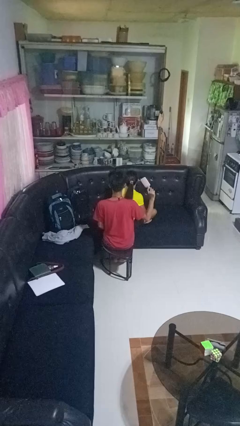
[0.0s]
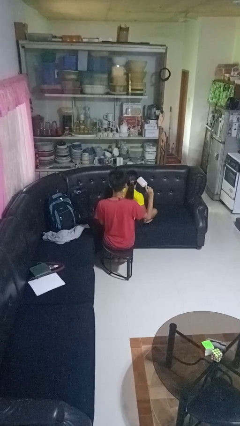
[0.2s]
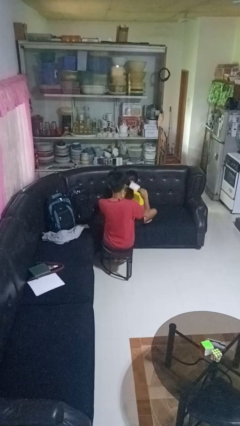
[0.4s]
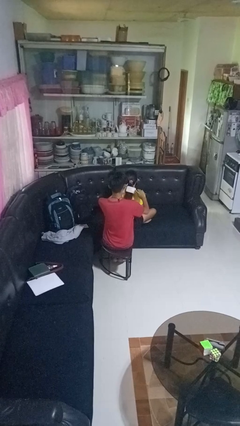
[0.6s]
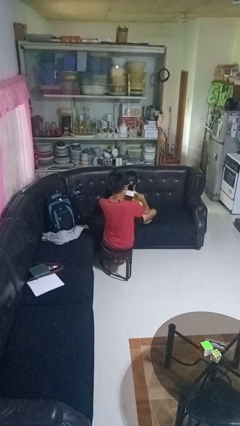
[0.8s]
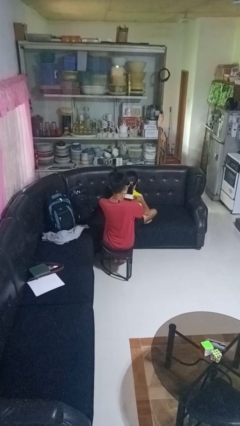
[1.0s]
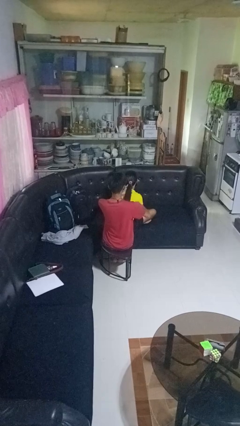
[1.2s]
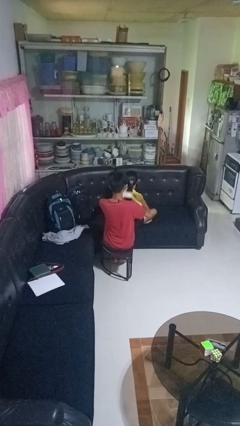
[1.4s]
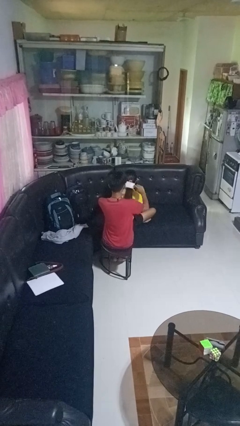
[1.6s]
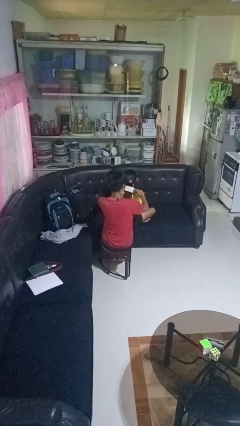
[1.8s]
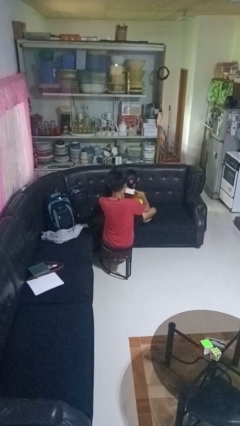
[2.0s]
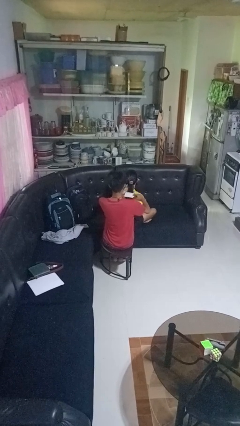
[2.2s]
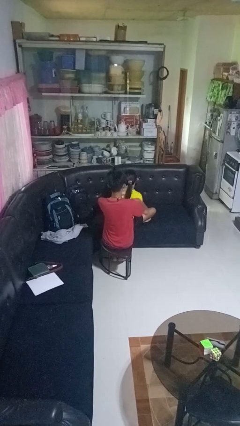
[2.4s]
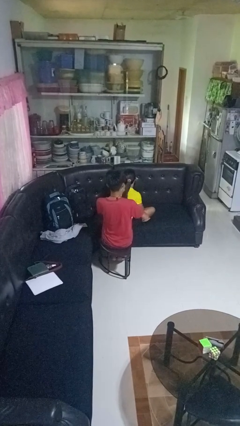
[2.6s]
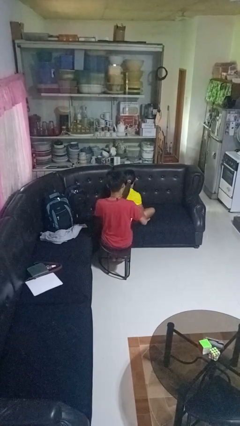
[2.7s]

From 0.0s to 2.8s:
person brushes hair of person

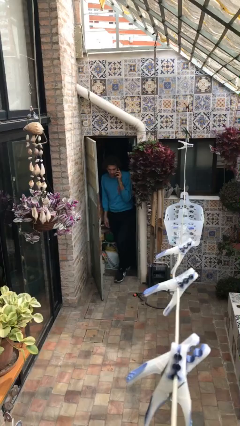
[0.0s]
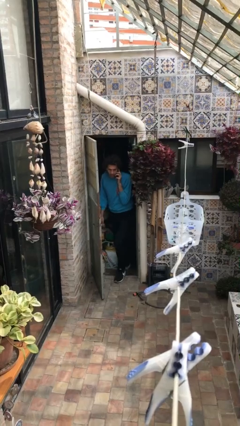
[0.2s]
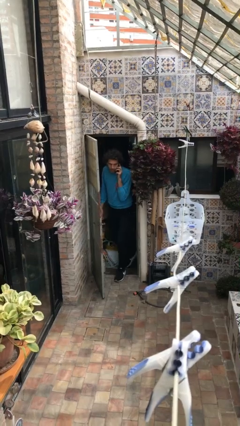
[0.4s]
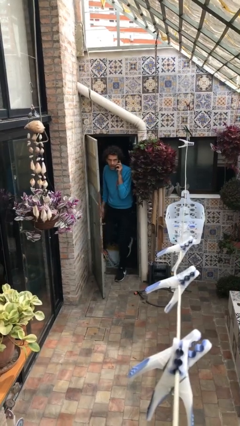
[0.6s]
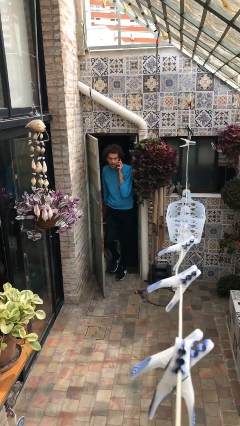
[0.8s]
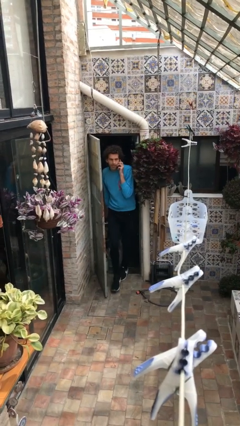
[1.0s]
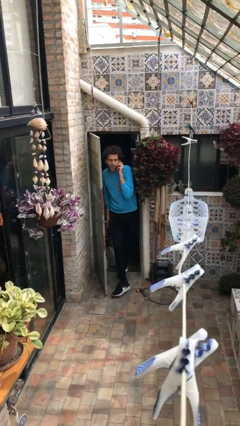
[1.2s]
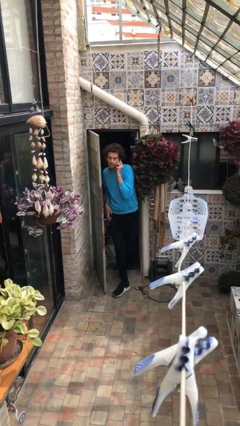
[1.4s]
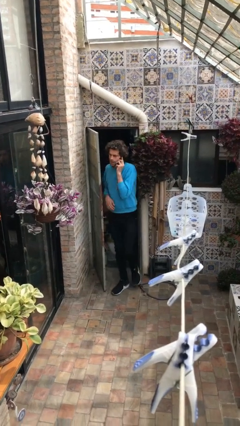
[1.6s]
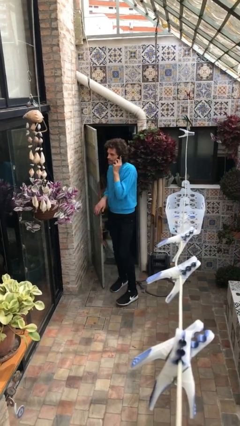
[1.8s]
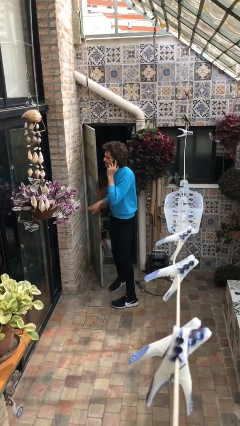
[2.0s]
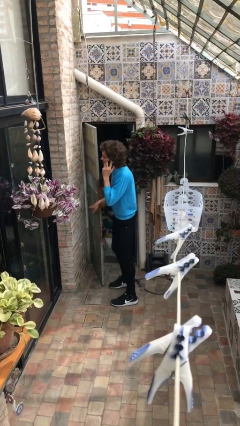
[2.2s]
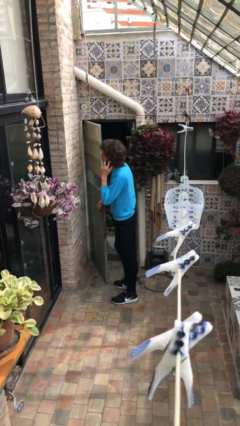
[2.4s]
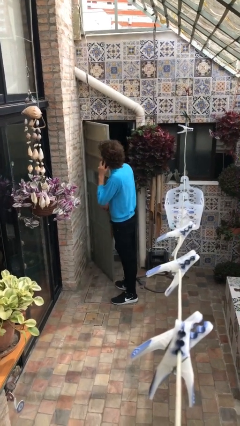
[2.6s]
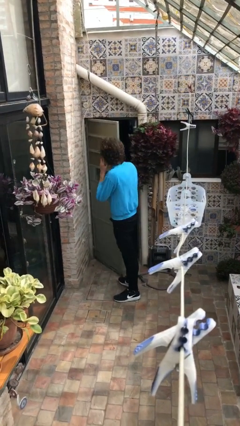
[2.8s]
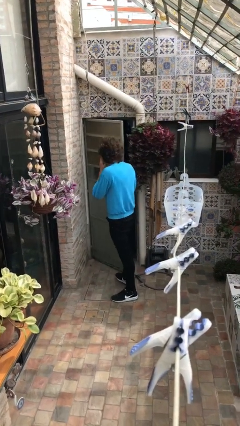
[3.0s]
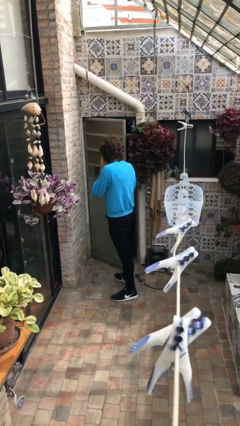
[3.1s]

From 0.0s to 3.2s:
person enters scene through structure

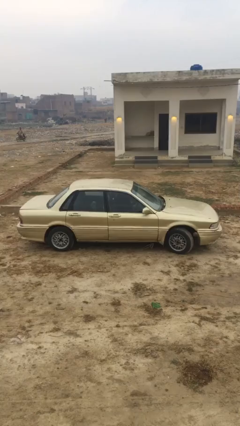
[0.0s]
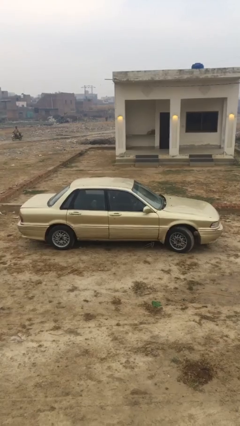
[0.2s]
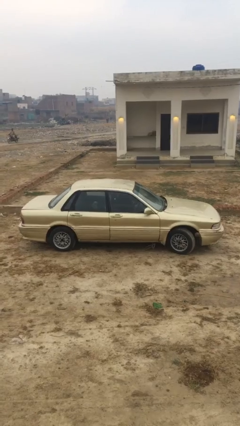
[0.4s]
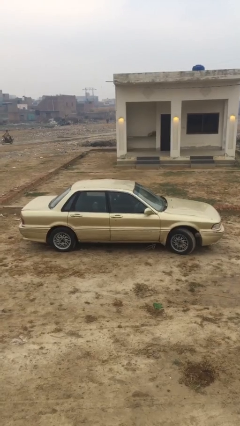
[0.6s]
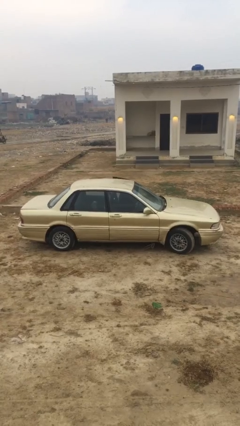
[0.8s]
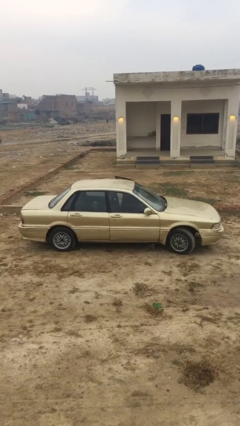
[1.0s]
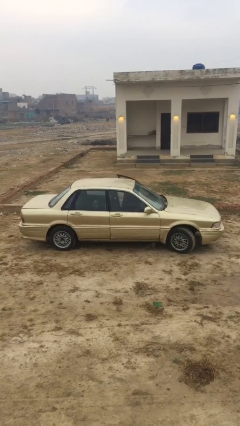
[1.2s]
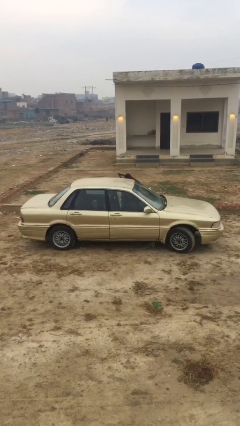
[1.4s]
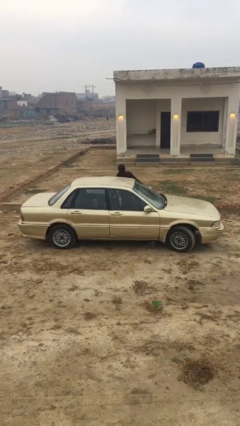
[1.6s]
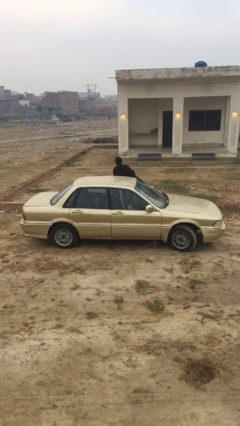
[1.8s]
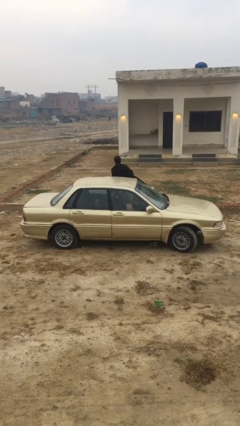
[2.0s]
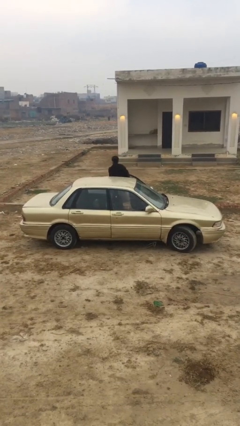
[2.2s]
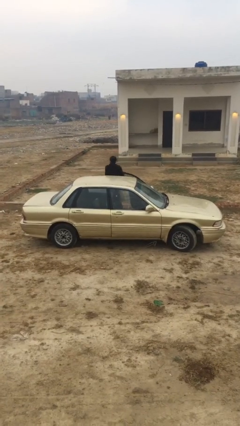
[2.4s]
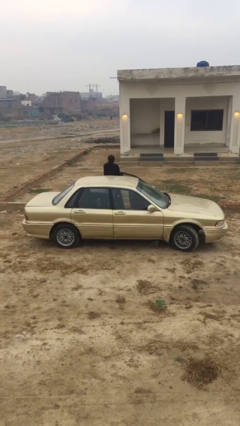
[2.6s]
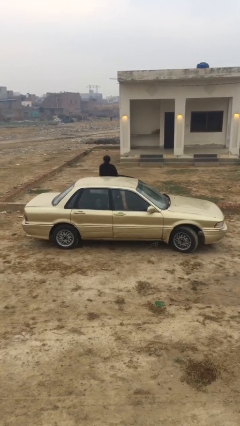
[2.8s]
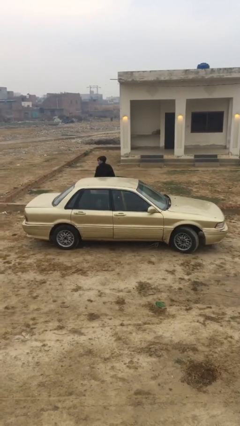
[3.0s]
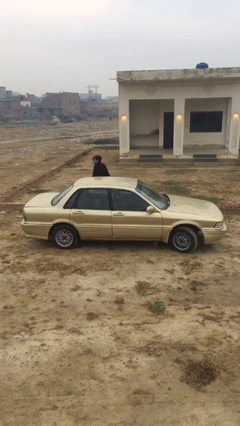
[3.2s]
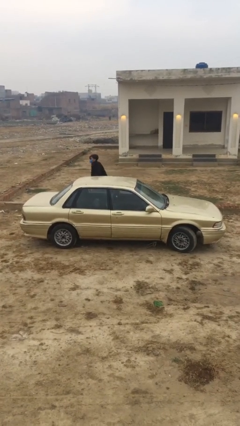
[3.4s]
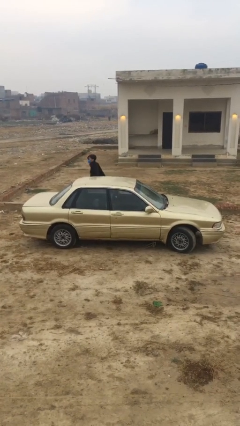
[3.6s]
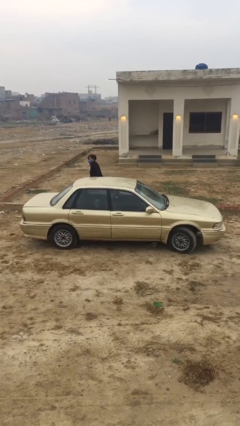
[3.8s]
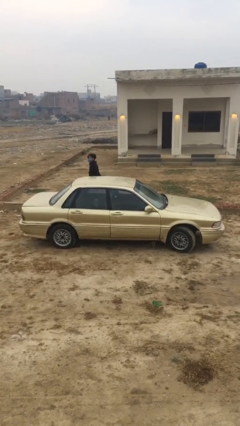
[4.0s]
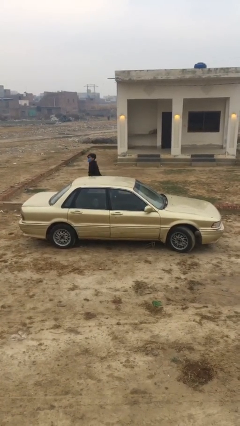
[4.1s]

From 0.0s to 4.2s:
car drops off person

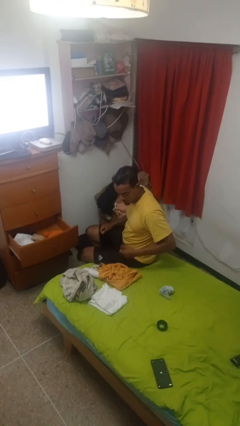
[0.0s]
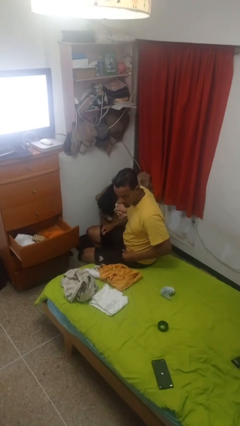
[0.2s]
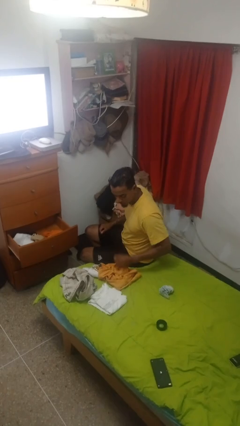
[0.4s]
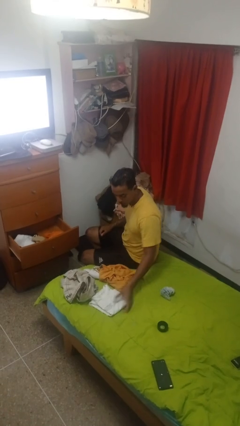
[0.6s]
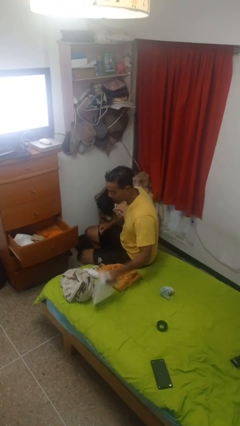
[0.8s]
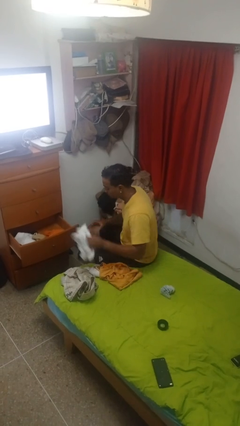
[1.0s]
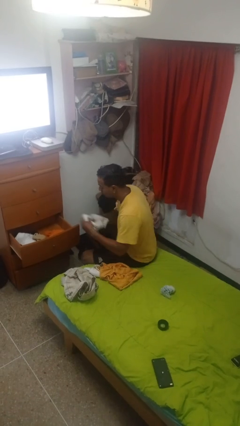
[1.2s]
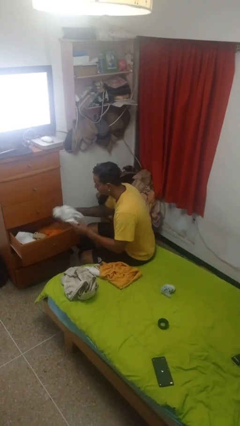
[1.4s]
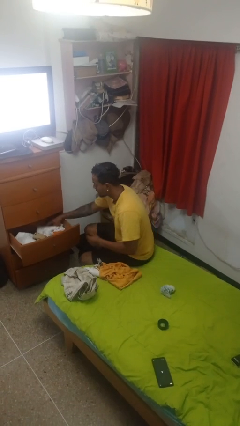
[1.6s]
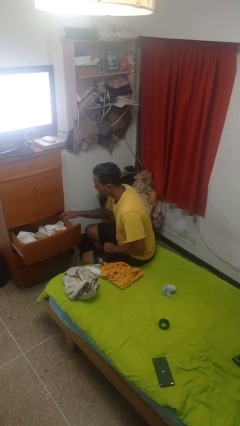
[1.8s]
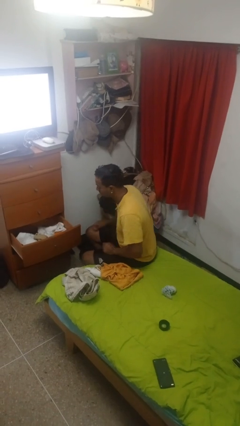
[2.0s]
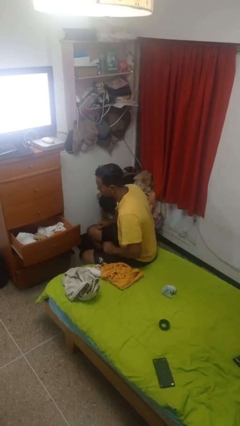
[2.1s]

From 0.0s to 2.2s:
person puts clothes into dresser

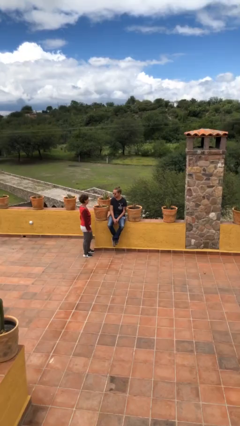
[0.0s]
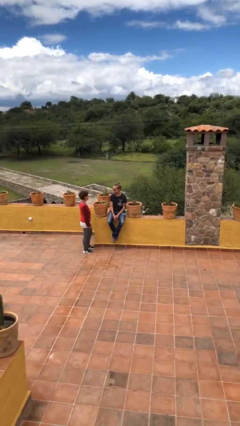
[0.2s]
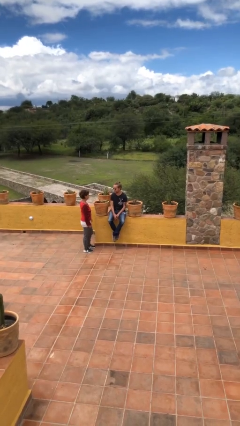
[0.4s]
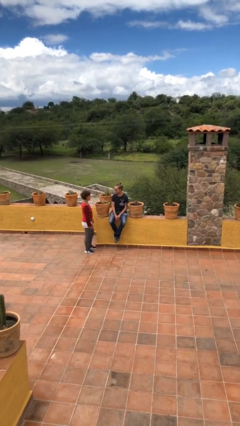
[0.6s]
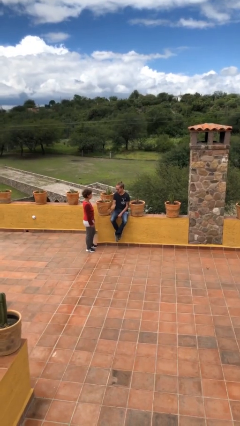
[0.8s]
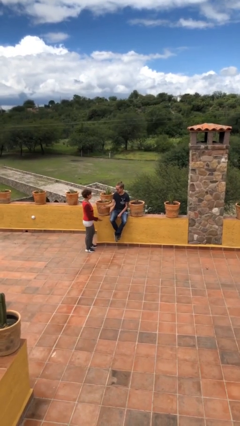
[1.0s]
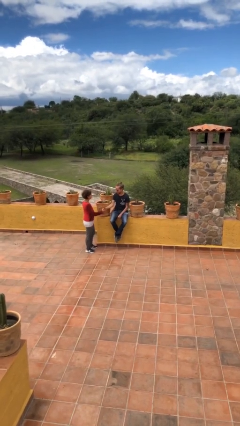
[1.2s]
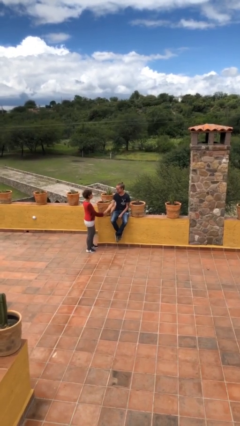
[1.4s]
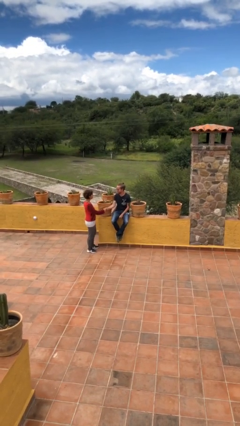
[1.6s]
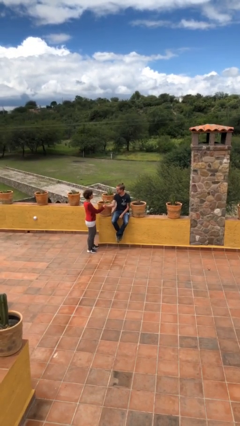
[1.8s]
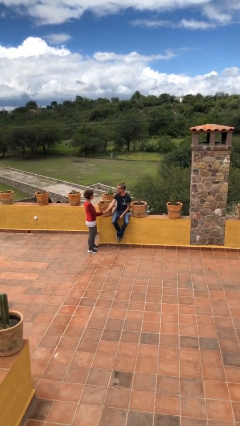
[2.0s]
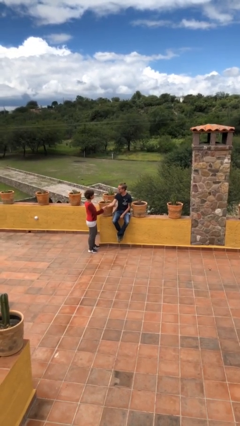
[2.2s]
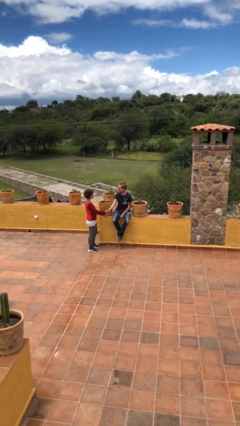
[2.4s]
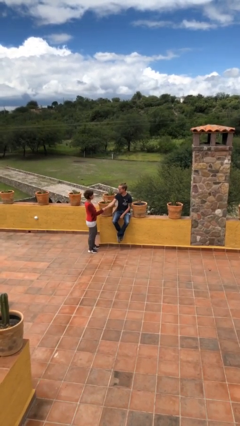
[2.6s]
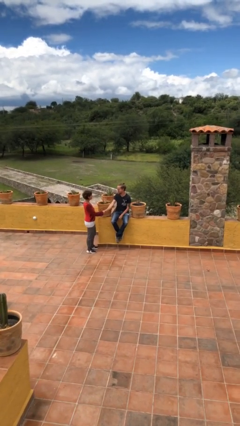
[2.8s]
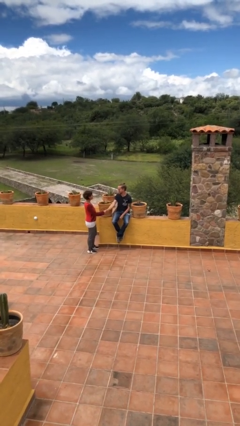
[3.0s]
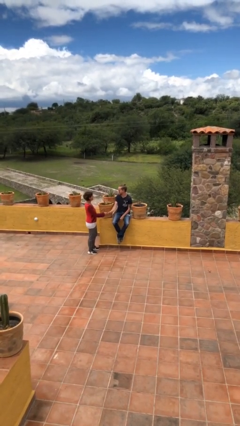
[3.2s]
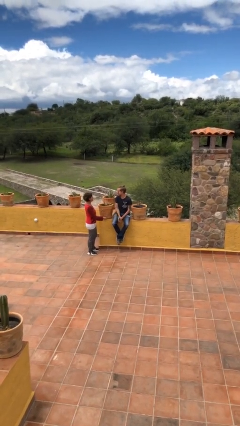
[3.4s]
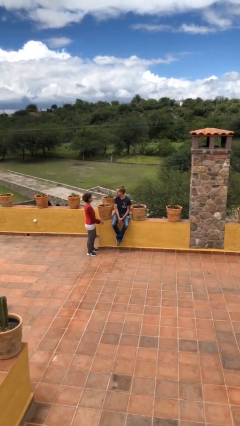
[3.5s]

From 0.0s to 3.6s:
person shakes hand

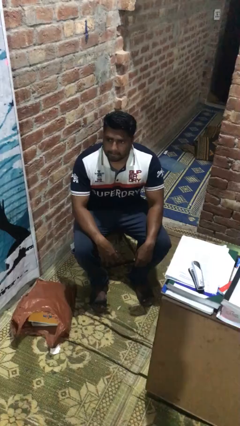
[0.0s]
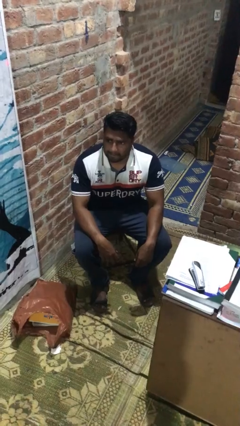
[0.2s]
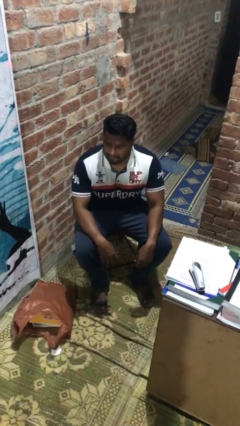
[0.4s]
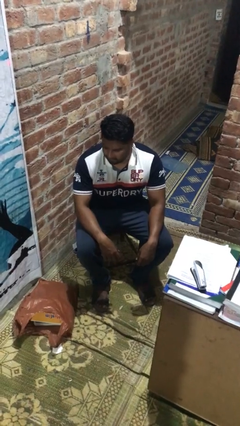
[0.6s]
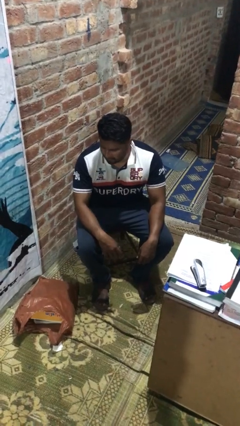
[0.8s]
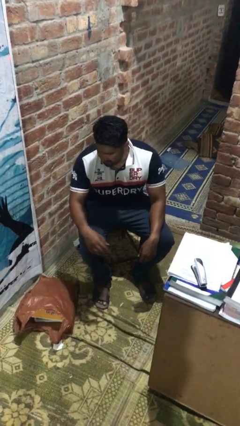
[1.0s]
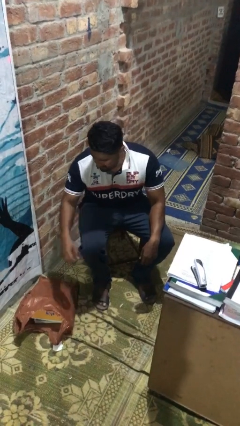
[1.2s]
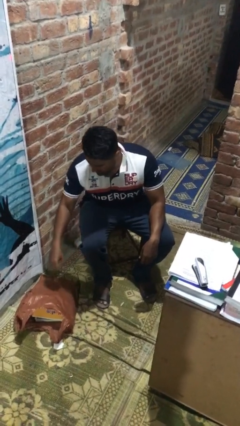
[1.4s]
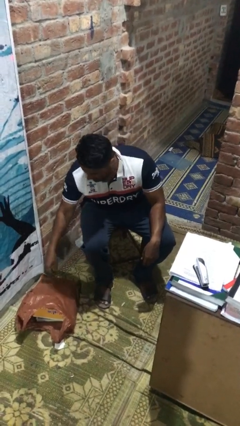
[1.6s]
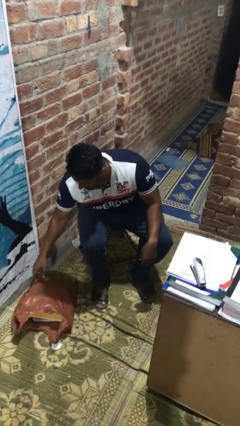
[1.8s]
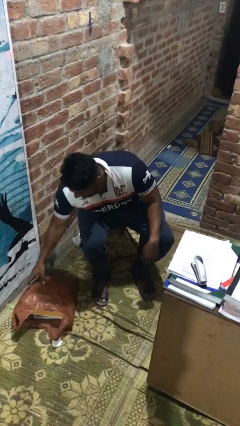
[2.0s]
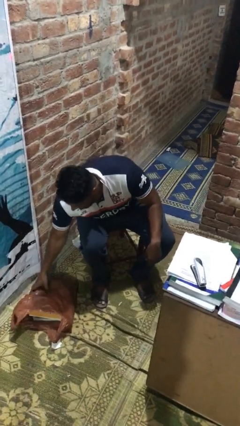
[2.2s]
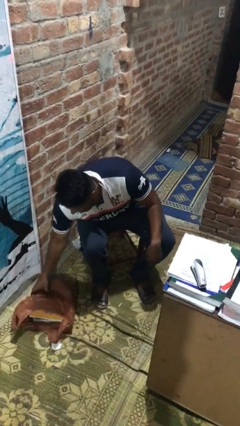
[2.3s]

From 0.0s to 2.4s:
person picks up object from floor
